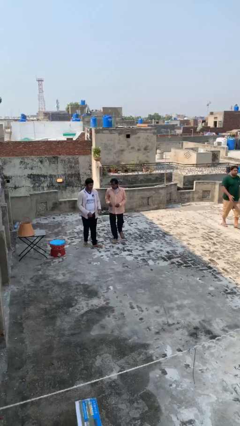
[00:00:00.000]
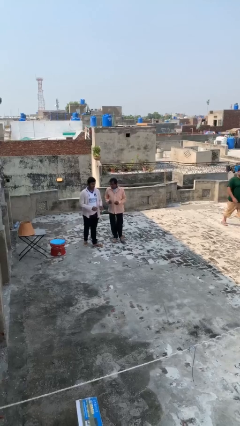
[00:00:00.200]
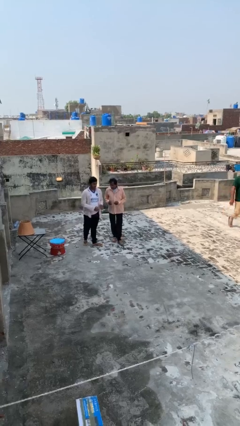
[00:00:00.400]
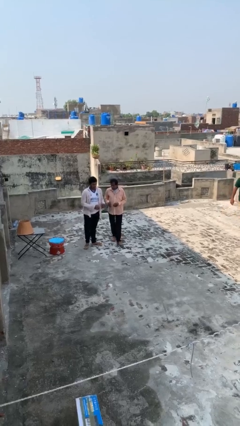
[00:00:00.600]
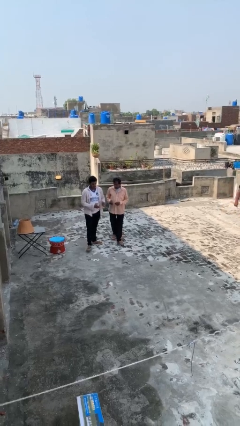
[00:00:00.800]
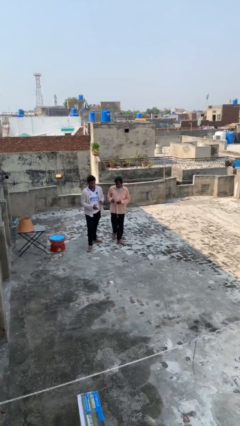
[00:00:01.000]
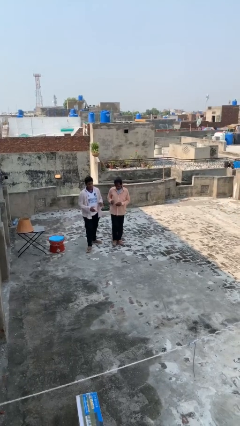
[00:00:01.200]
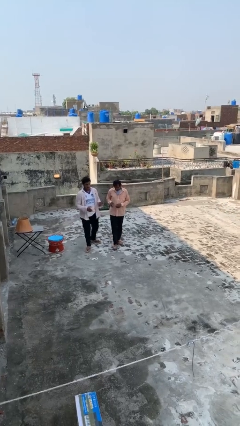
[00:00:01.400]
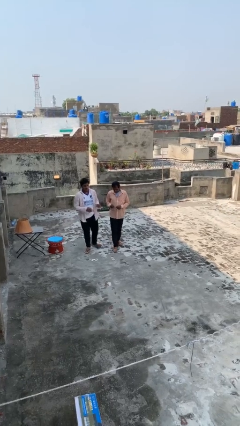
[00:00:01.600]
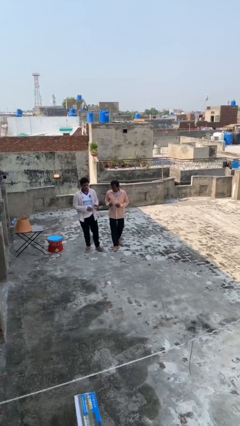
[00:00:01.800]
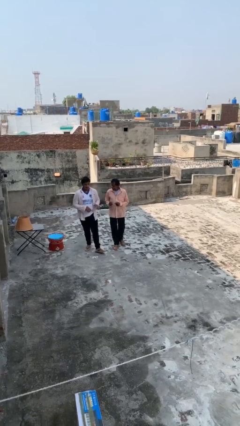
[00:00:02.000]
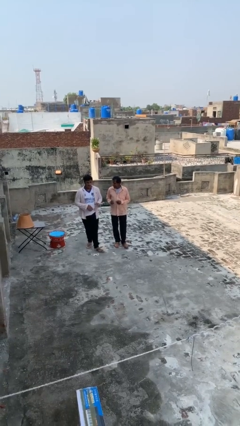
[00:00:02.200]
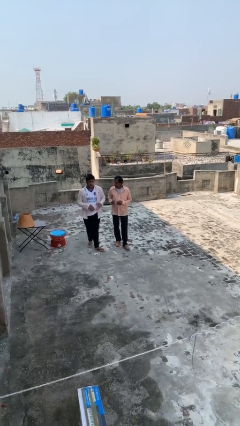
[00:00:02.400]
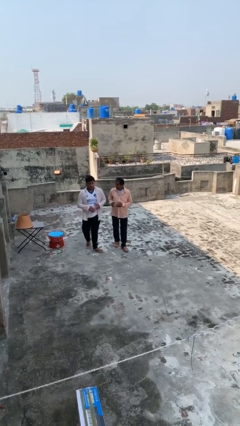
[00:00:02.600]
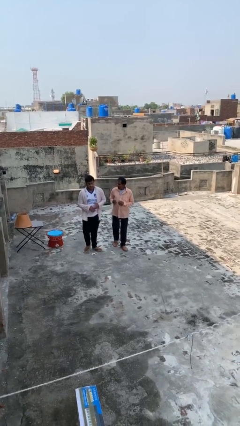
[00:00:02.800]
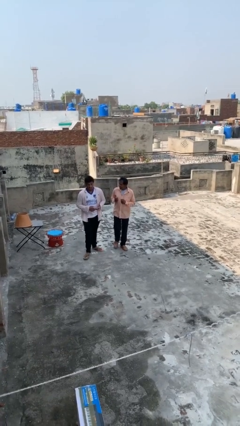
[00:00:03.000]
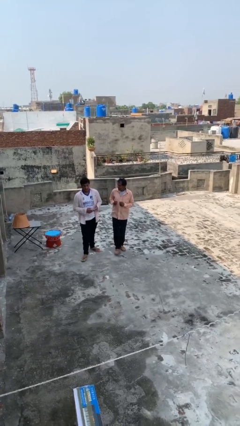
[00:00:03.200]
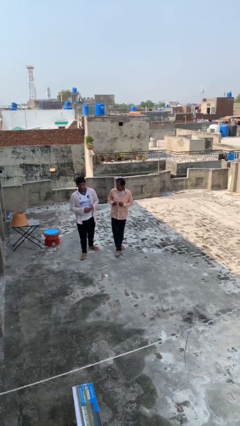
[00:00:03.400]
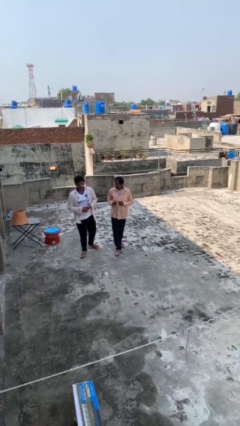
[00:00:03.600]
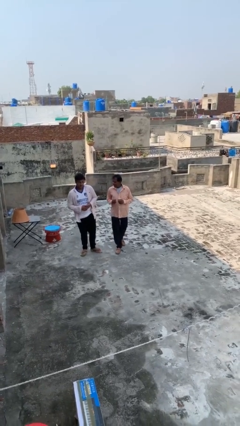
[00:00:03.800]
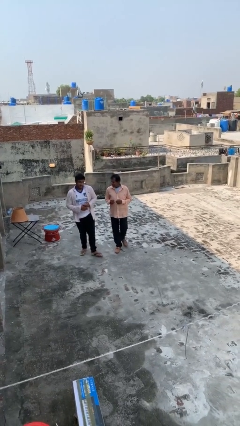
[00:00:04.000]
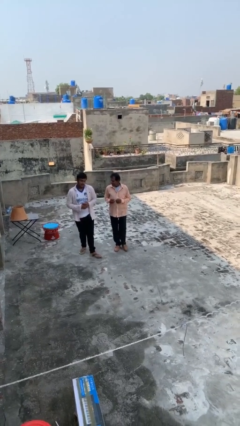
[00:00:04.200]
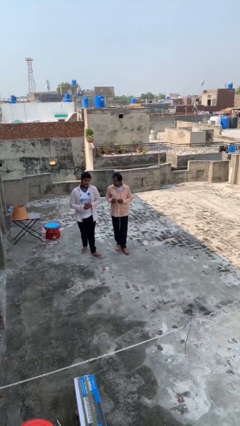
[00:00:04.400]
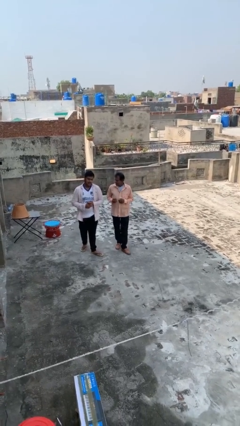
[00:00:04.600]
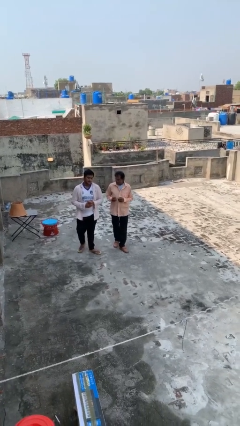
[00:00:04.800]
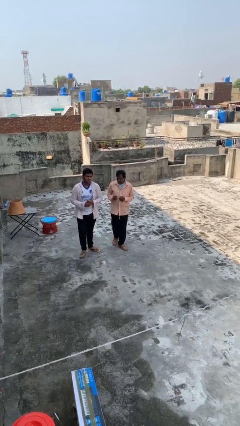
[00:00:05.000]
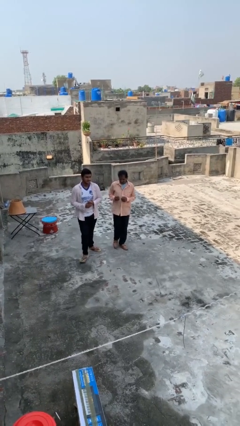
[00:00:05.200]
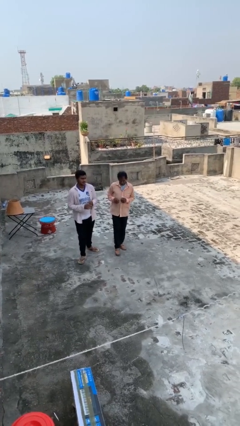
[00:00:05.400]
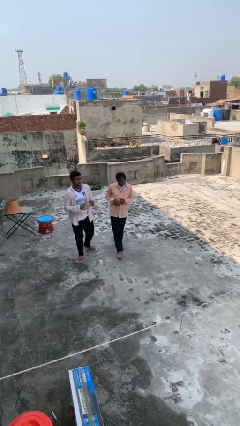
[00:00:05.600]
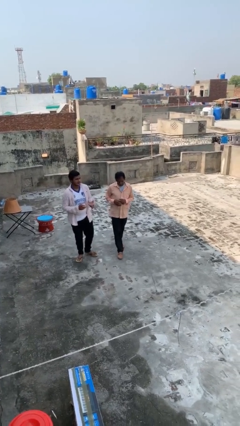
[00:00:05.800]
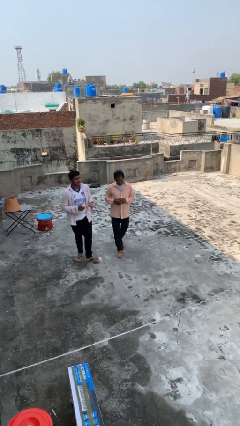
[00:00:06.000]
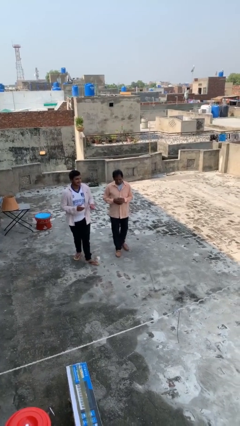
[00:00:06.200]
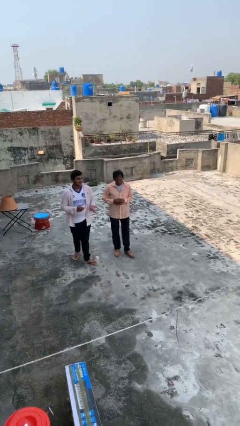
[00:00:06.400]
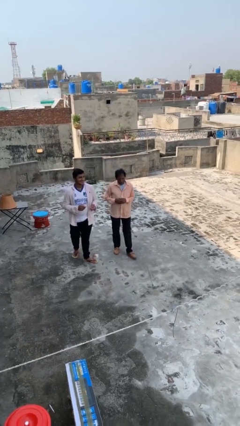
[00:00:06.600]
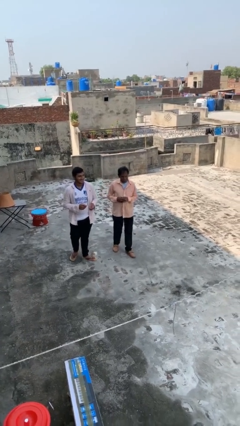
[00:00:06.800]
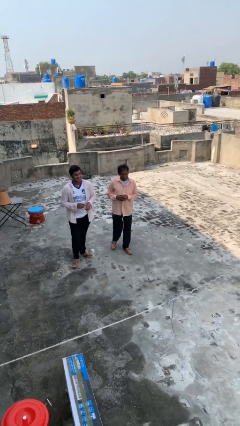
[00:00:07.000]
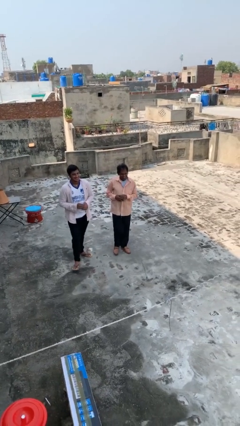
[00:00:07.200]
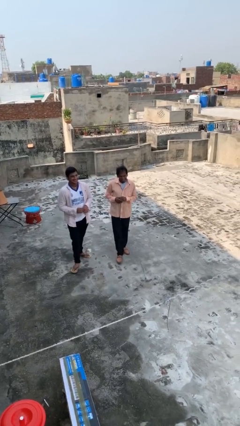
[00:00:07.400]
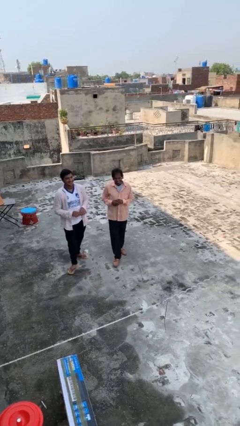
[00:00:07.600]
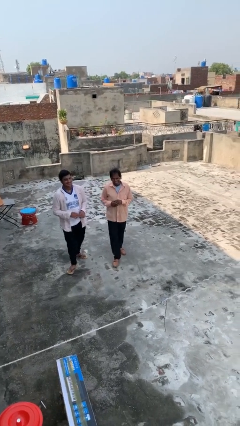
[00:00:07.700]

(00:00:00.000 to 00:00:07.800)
person talks to person

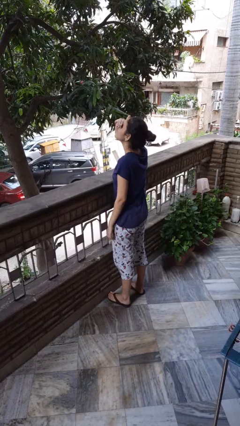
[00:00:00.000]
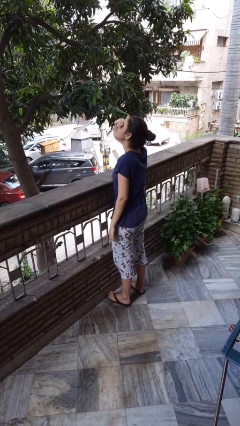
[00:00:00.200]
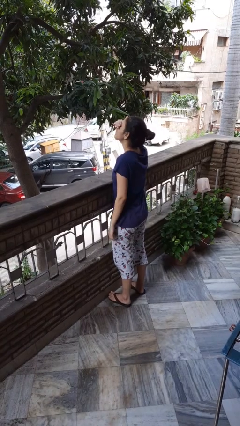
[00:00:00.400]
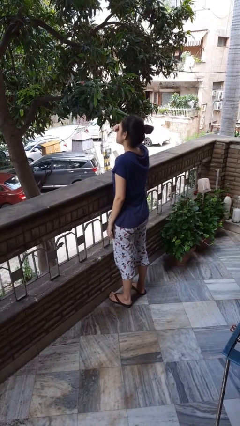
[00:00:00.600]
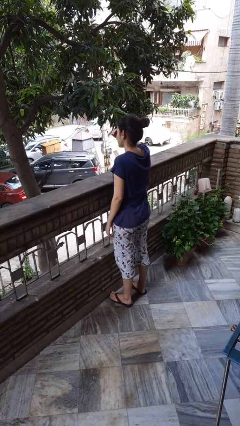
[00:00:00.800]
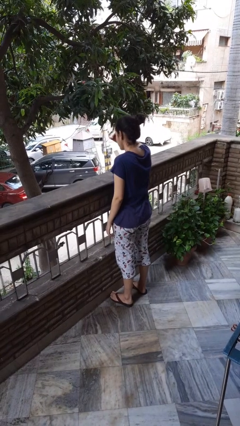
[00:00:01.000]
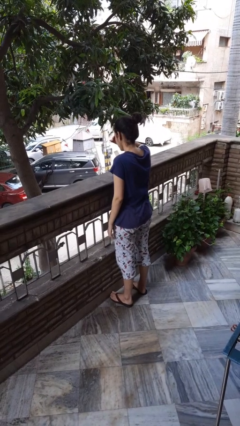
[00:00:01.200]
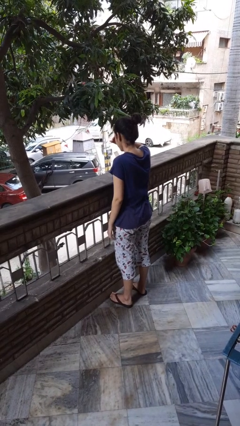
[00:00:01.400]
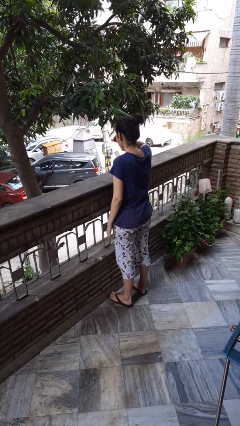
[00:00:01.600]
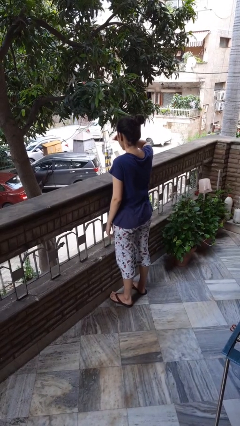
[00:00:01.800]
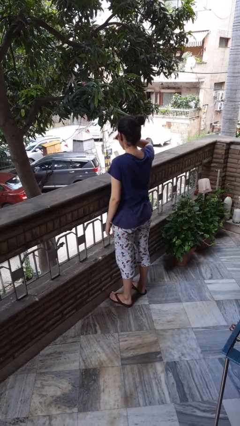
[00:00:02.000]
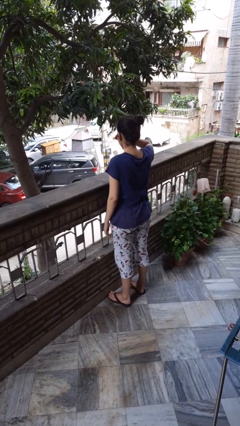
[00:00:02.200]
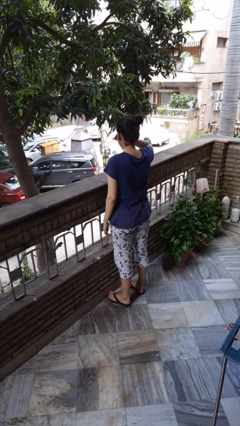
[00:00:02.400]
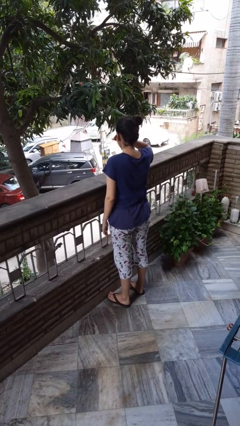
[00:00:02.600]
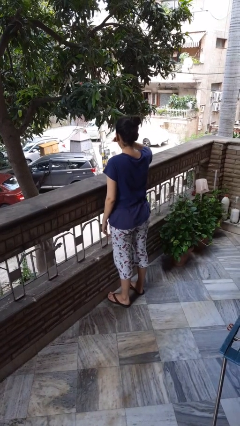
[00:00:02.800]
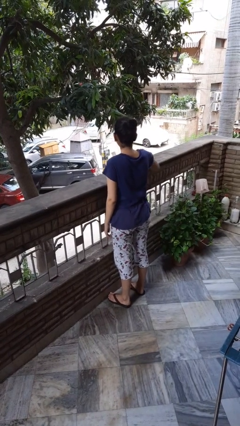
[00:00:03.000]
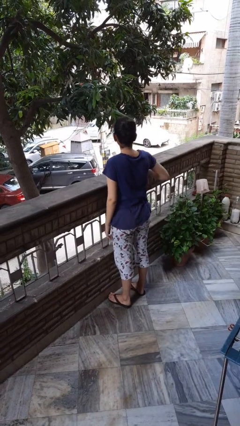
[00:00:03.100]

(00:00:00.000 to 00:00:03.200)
person shades eyes

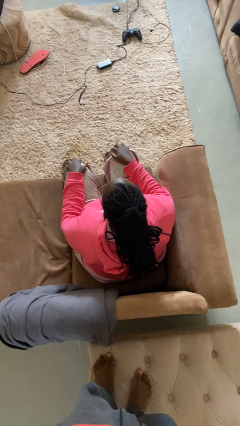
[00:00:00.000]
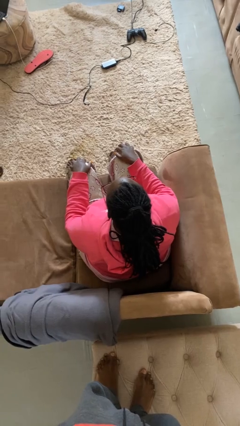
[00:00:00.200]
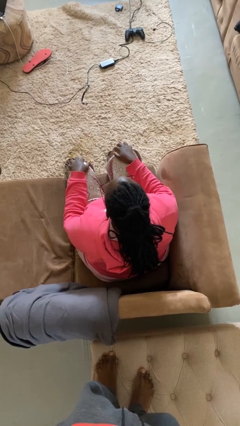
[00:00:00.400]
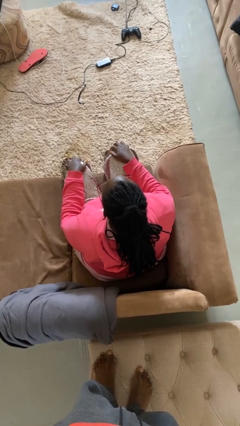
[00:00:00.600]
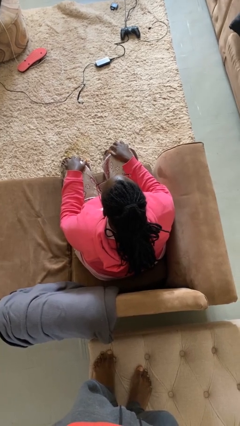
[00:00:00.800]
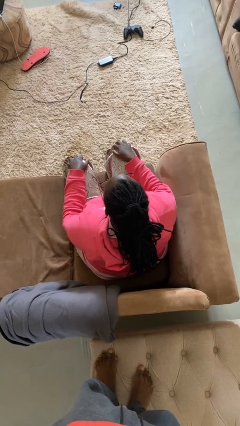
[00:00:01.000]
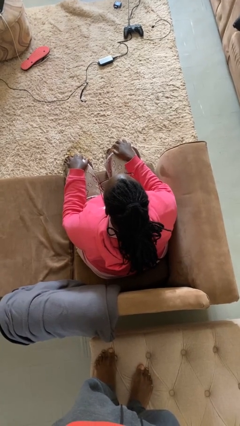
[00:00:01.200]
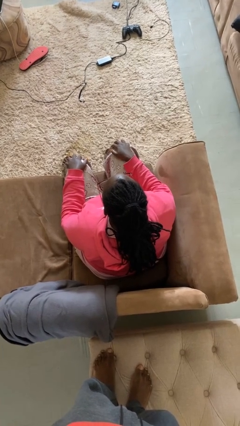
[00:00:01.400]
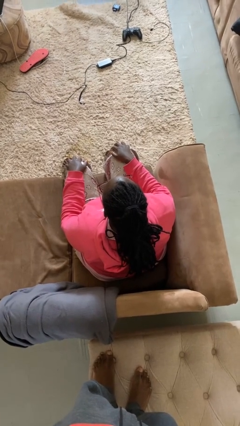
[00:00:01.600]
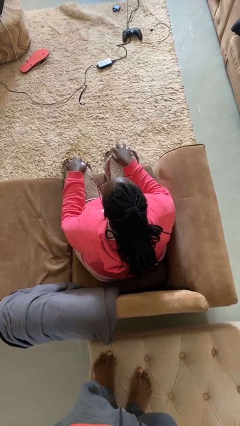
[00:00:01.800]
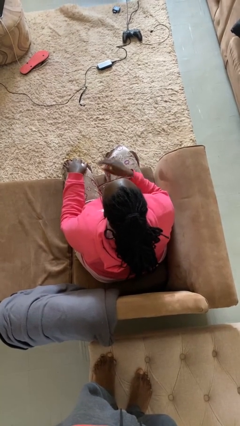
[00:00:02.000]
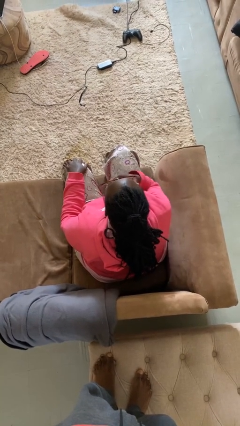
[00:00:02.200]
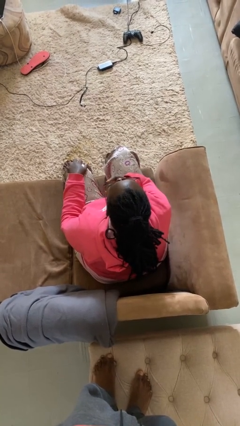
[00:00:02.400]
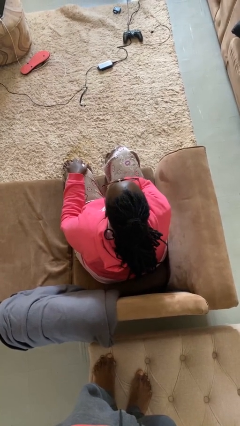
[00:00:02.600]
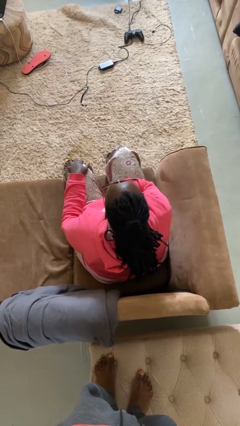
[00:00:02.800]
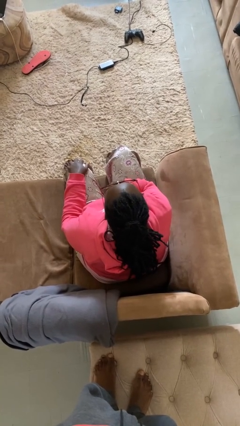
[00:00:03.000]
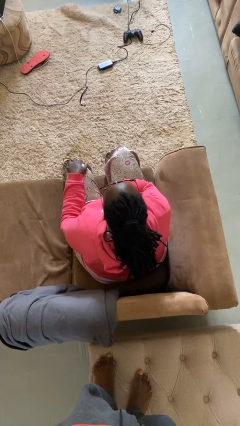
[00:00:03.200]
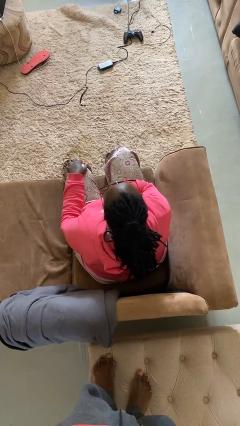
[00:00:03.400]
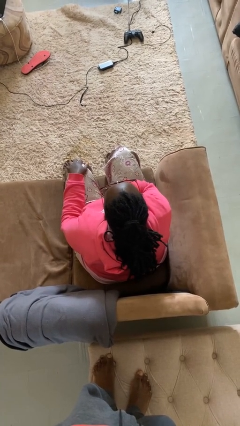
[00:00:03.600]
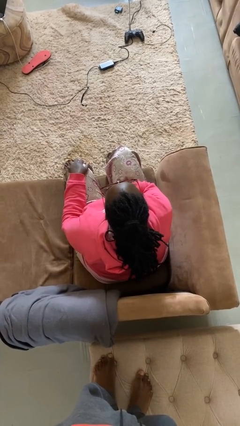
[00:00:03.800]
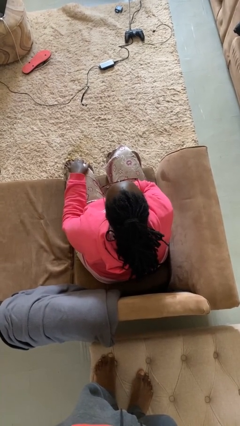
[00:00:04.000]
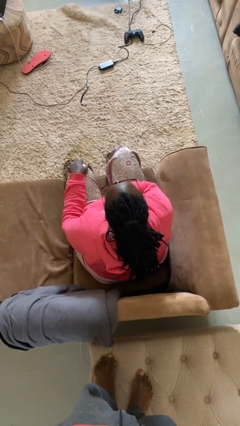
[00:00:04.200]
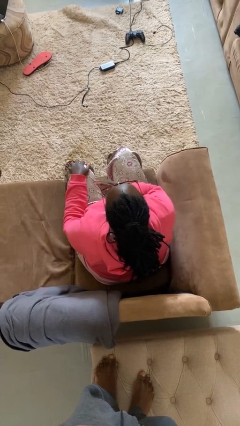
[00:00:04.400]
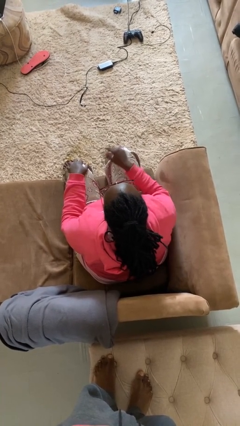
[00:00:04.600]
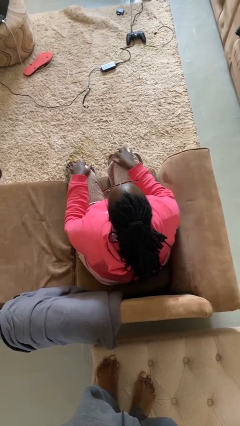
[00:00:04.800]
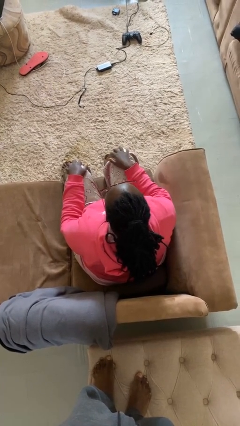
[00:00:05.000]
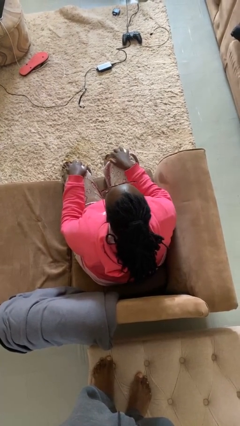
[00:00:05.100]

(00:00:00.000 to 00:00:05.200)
person strokes chin

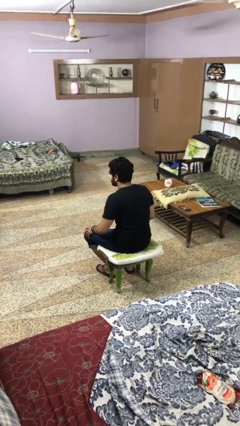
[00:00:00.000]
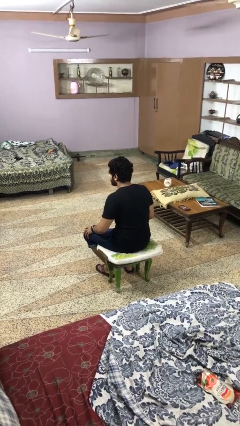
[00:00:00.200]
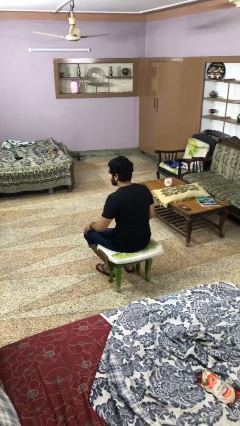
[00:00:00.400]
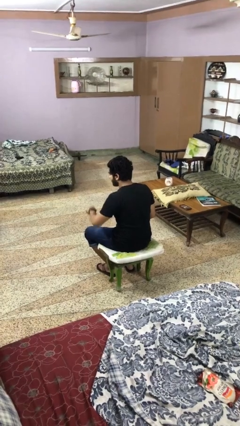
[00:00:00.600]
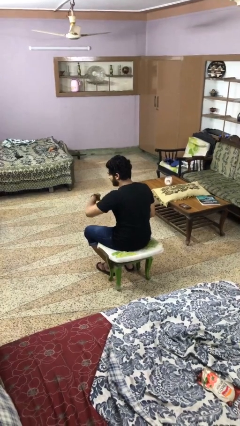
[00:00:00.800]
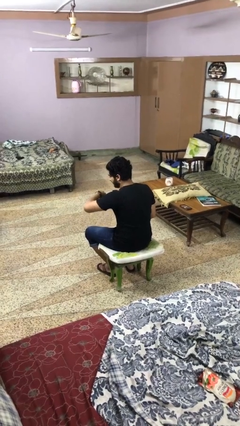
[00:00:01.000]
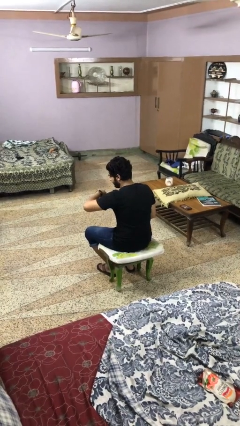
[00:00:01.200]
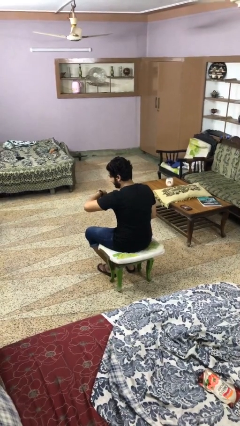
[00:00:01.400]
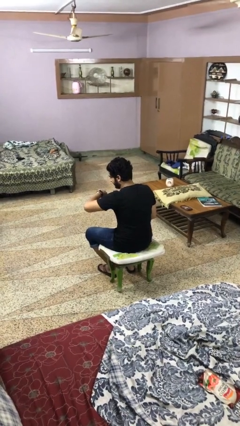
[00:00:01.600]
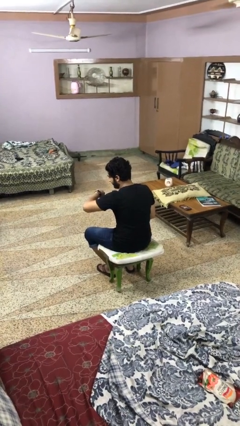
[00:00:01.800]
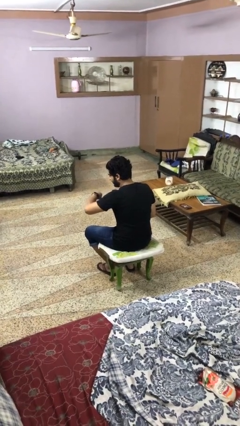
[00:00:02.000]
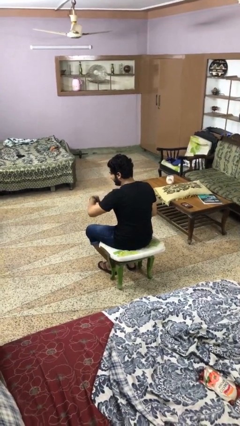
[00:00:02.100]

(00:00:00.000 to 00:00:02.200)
person looks at wristwatch
